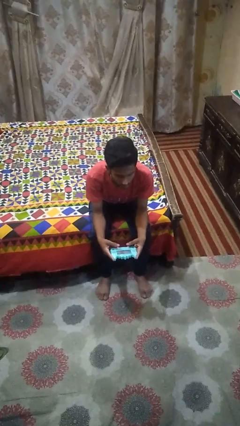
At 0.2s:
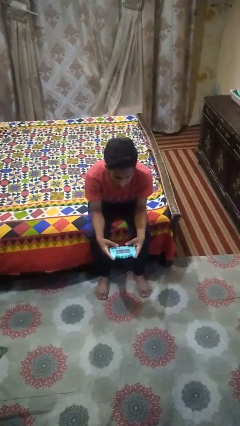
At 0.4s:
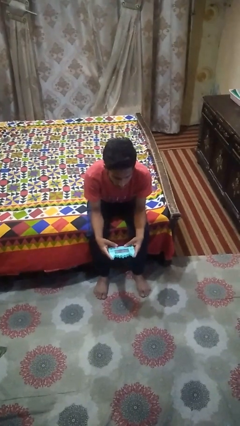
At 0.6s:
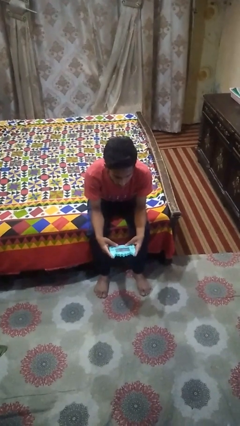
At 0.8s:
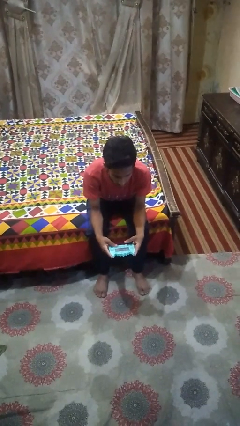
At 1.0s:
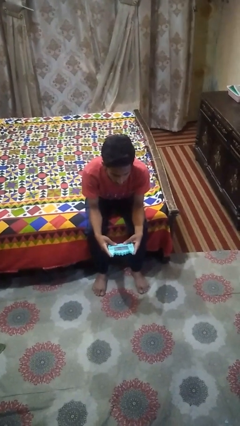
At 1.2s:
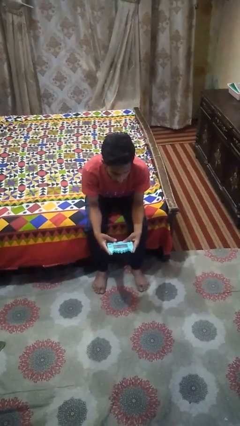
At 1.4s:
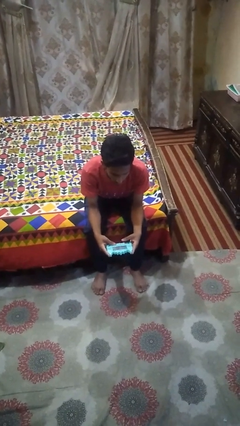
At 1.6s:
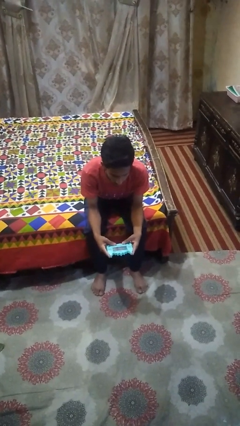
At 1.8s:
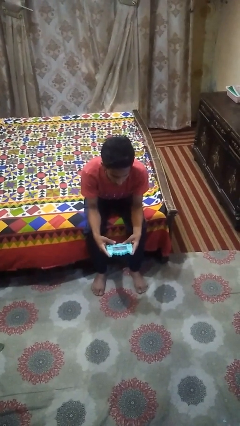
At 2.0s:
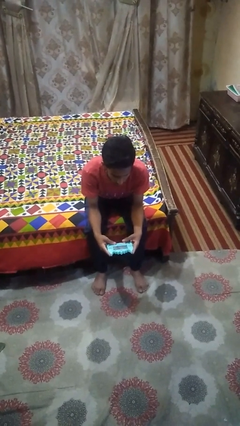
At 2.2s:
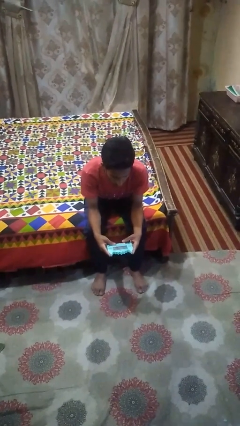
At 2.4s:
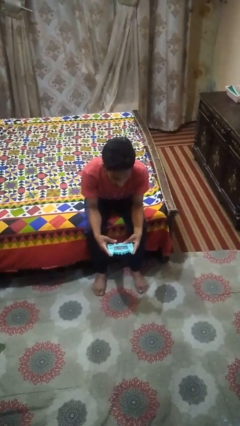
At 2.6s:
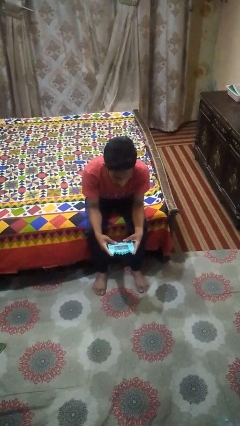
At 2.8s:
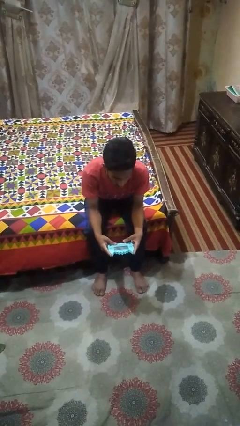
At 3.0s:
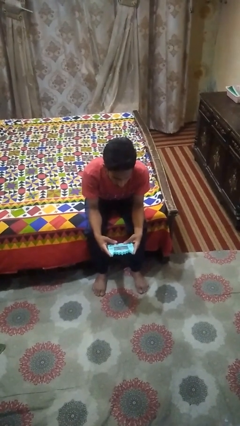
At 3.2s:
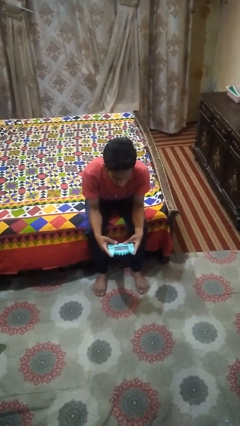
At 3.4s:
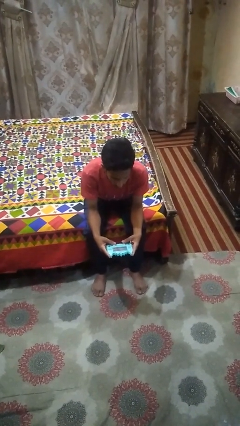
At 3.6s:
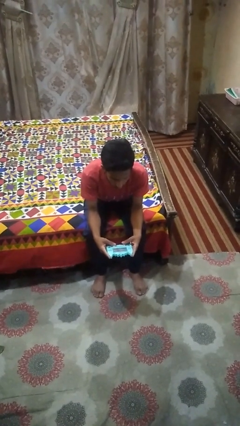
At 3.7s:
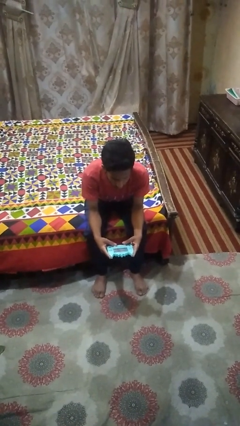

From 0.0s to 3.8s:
person interacts with handheld game

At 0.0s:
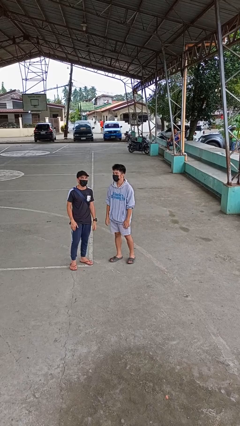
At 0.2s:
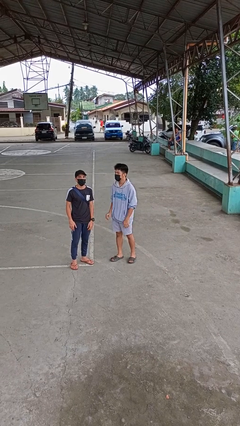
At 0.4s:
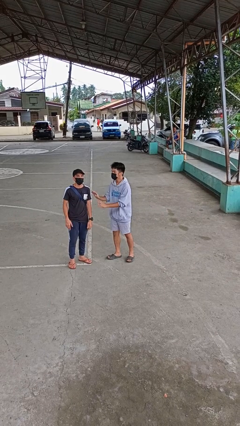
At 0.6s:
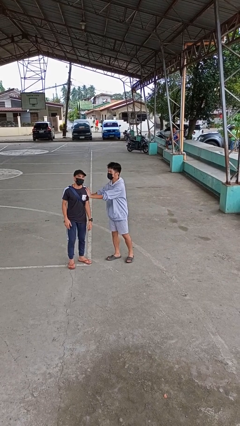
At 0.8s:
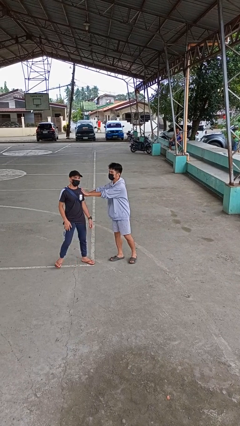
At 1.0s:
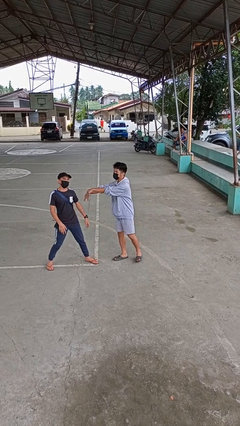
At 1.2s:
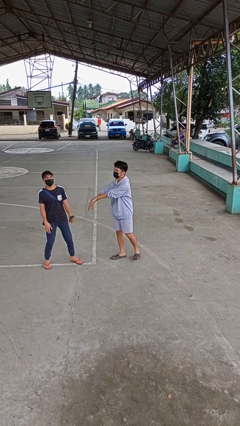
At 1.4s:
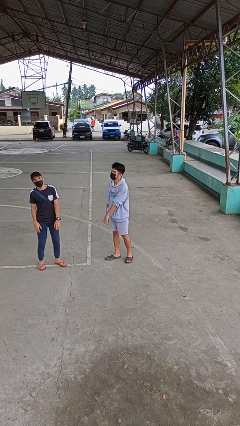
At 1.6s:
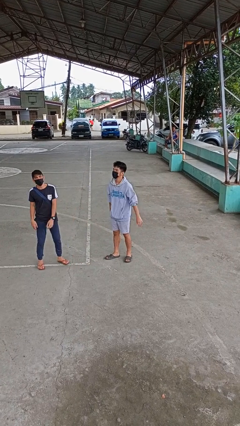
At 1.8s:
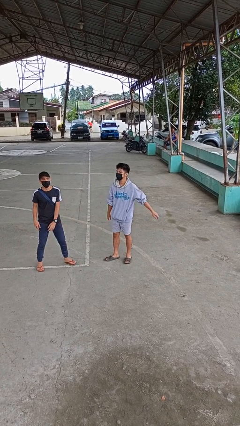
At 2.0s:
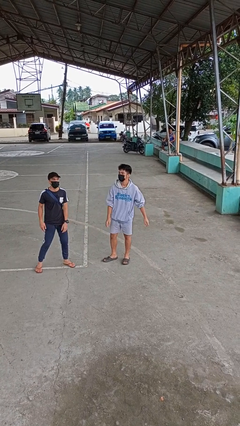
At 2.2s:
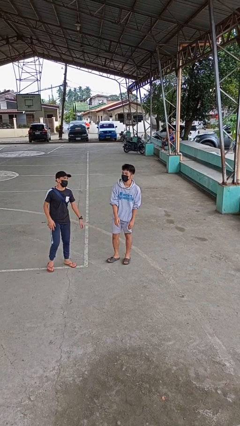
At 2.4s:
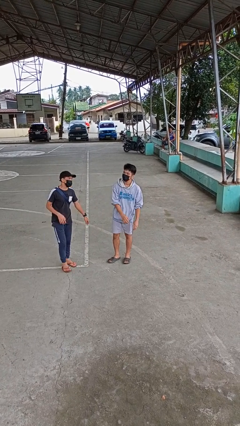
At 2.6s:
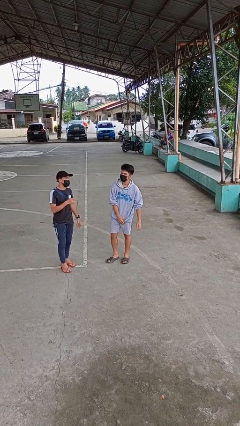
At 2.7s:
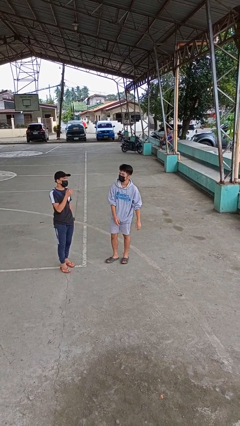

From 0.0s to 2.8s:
person shoves person

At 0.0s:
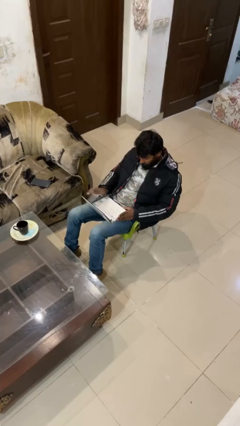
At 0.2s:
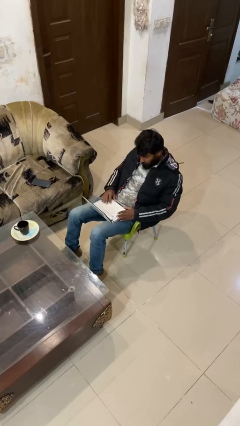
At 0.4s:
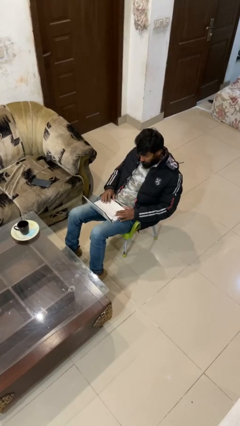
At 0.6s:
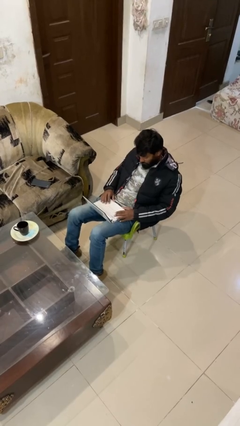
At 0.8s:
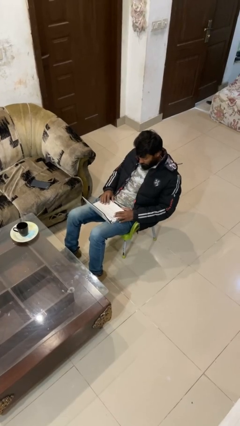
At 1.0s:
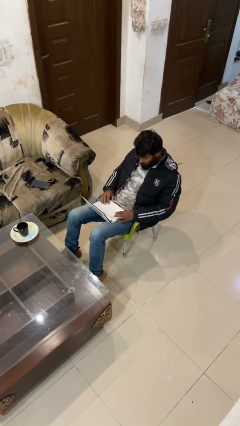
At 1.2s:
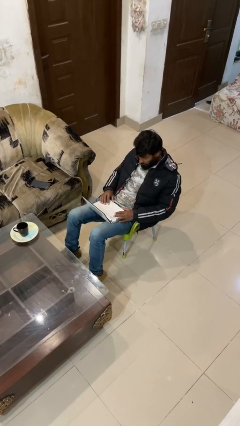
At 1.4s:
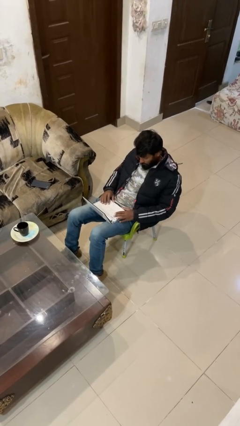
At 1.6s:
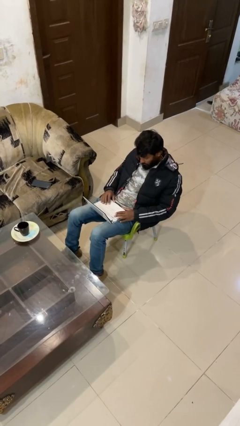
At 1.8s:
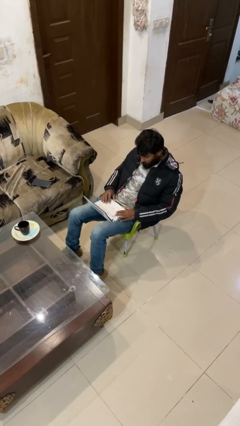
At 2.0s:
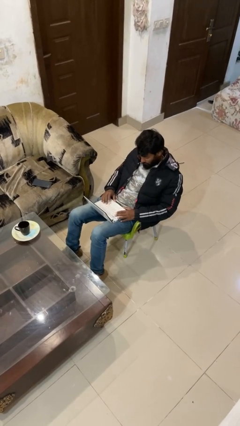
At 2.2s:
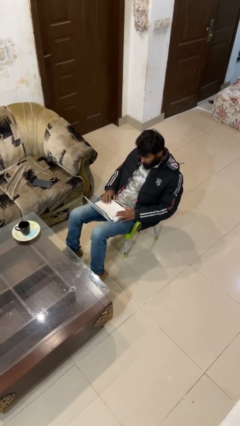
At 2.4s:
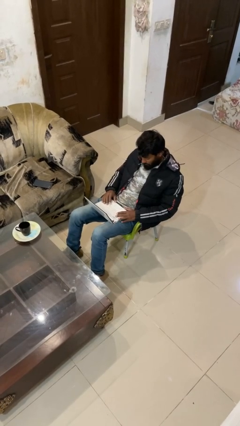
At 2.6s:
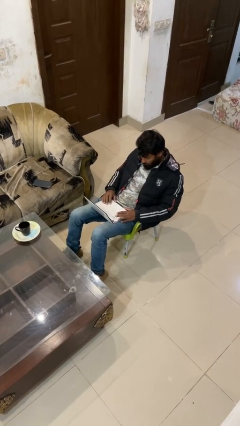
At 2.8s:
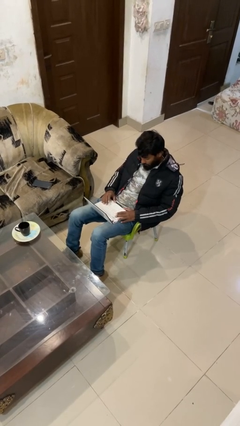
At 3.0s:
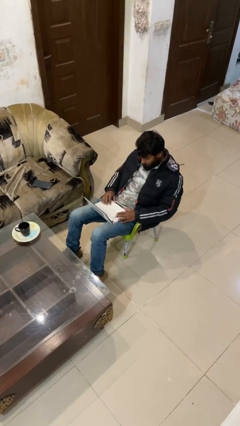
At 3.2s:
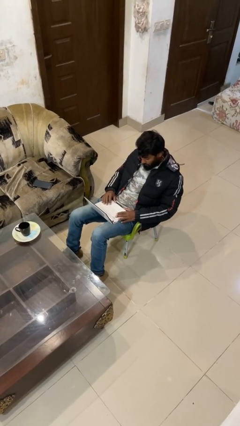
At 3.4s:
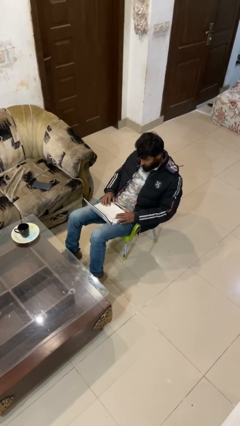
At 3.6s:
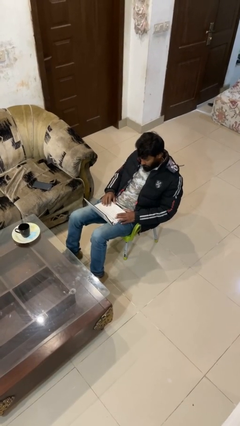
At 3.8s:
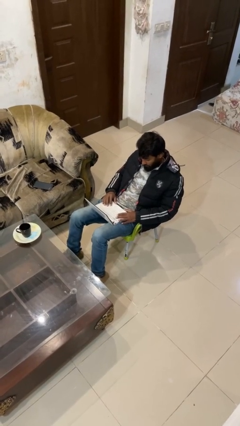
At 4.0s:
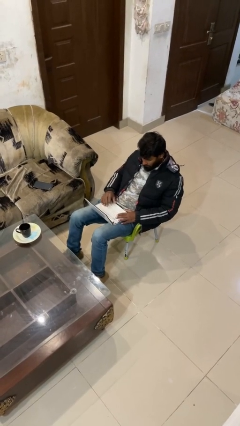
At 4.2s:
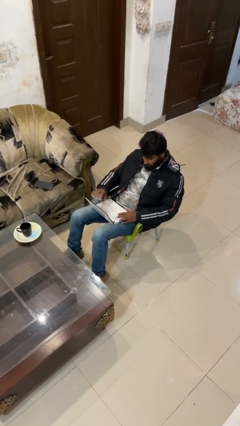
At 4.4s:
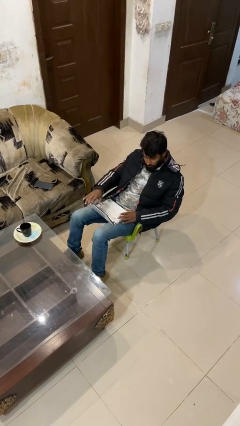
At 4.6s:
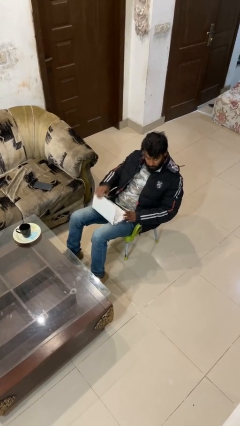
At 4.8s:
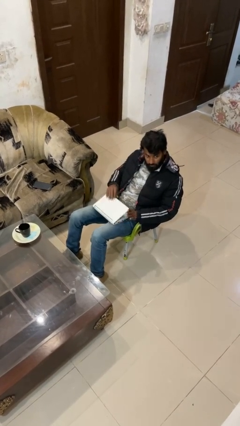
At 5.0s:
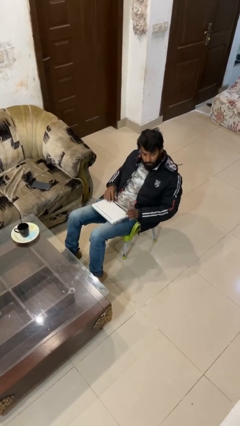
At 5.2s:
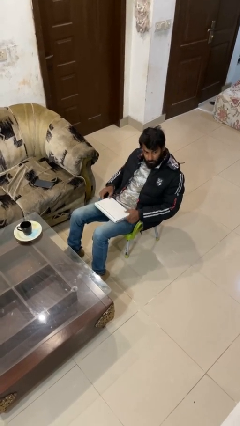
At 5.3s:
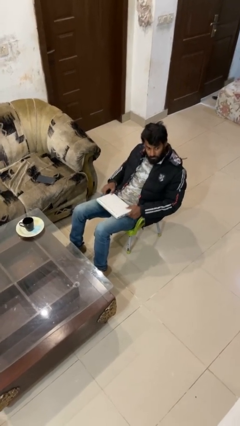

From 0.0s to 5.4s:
person interacts with laptop

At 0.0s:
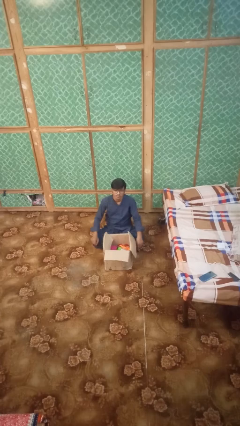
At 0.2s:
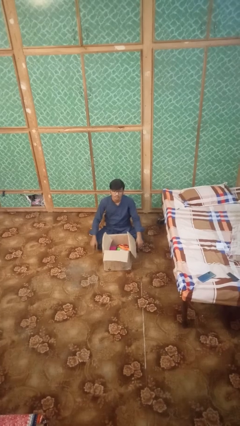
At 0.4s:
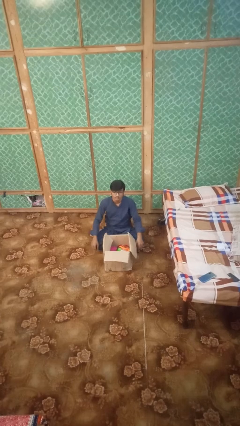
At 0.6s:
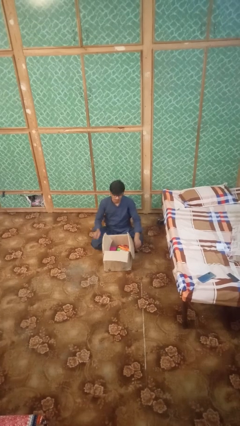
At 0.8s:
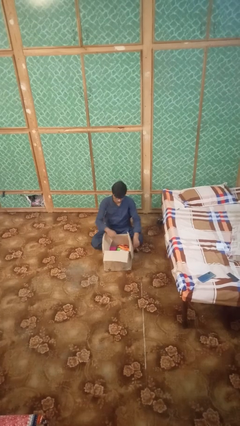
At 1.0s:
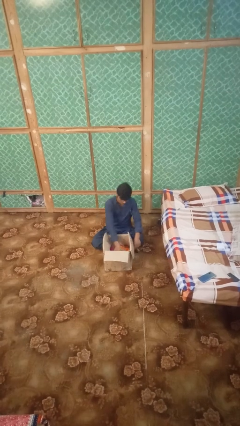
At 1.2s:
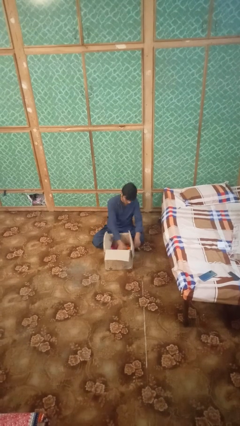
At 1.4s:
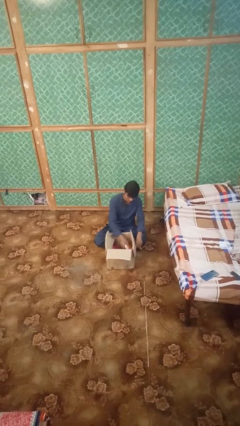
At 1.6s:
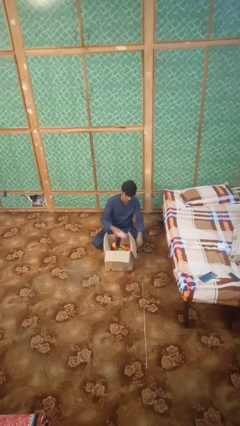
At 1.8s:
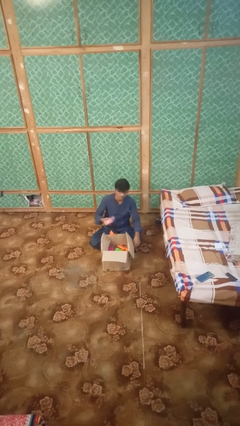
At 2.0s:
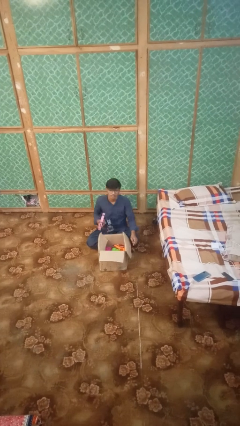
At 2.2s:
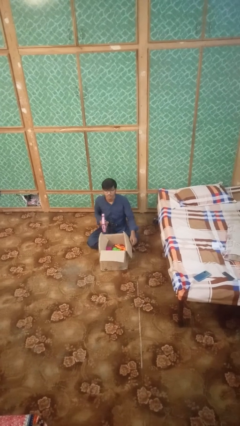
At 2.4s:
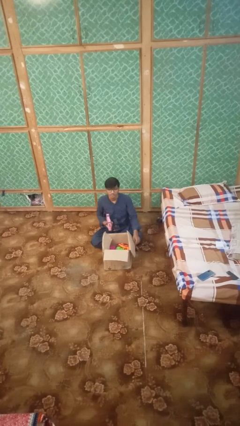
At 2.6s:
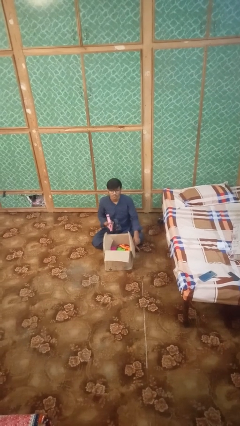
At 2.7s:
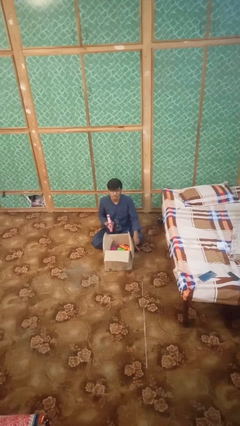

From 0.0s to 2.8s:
person takes object from box

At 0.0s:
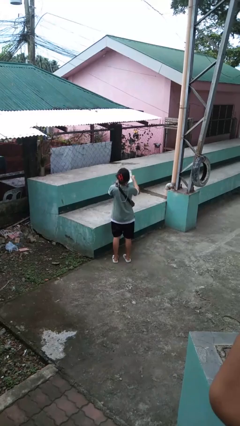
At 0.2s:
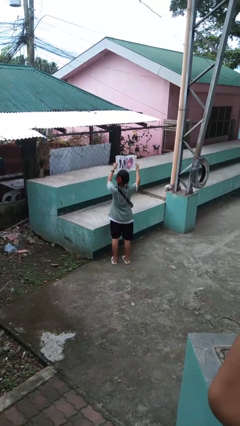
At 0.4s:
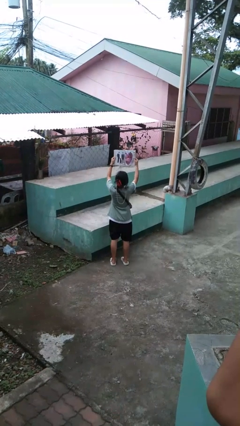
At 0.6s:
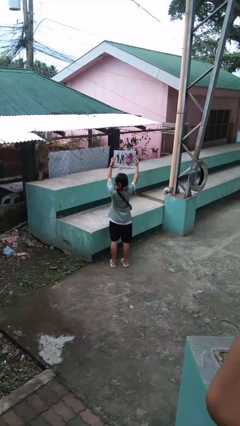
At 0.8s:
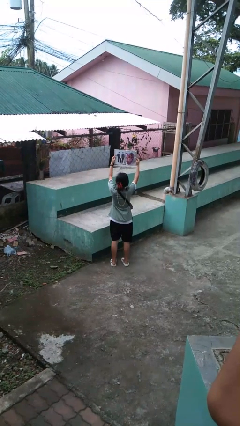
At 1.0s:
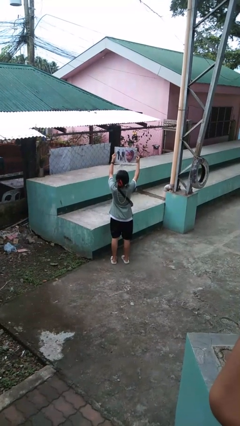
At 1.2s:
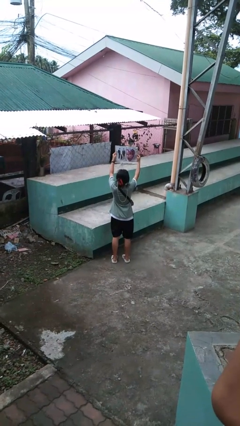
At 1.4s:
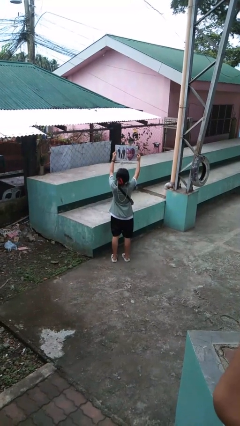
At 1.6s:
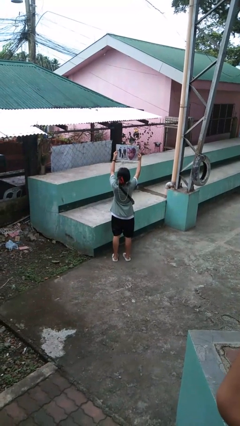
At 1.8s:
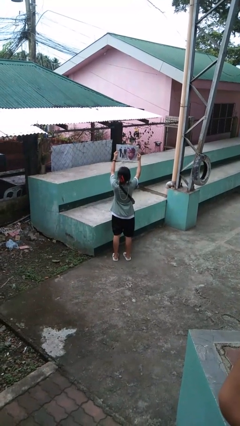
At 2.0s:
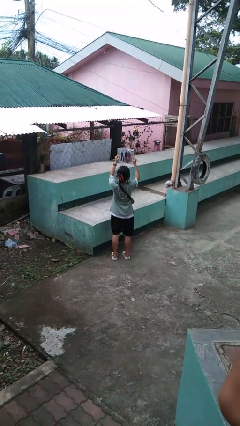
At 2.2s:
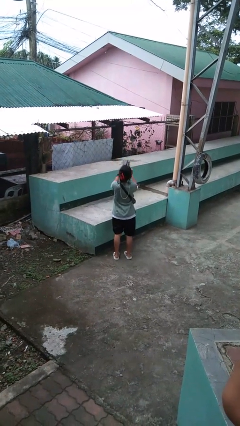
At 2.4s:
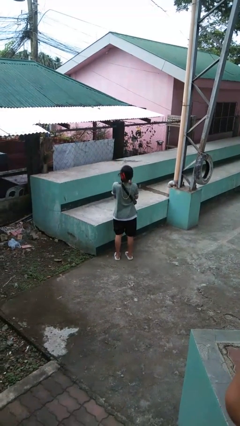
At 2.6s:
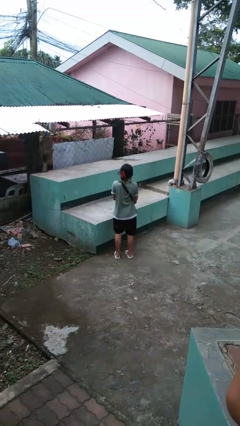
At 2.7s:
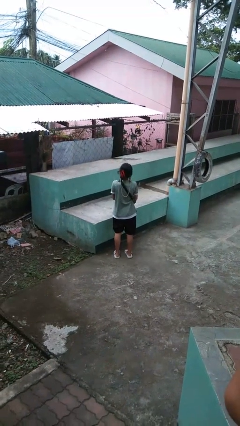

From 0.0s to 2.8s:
person reads magazine
